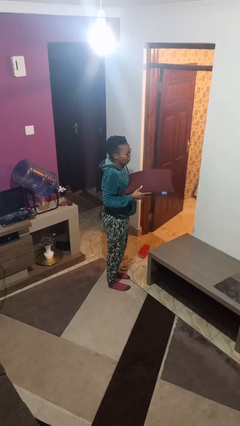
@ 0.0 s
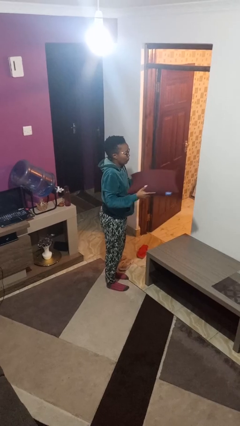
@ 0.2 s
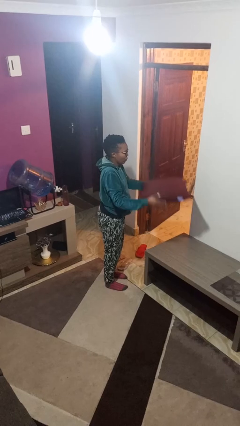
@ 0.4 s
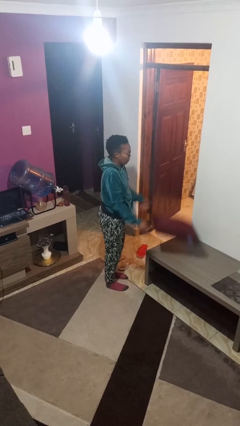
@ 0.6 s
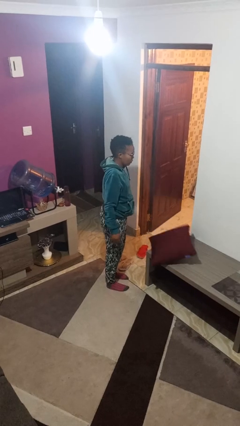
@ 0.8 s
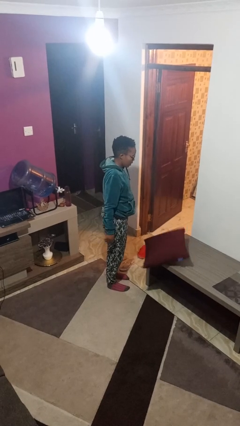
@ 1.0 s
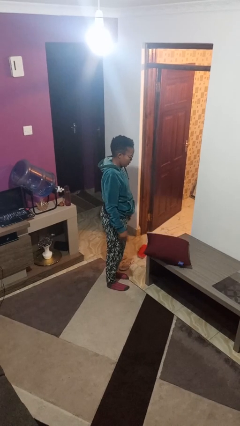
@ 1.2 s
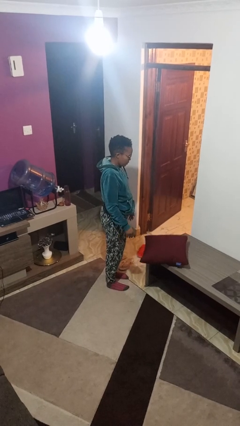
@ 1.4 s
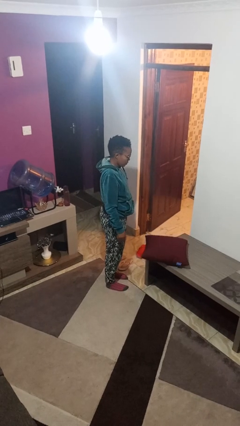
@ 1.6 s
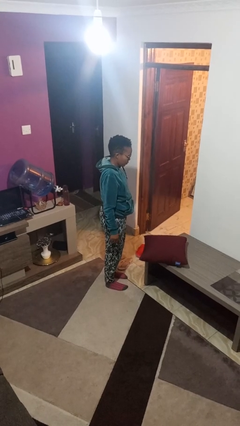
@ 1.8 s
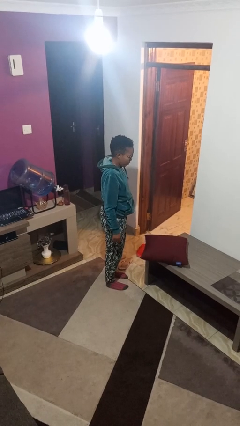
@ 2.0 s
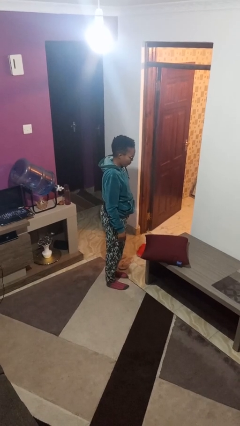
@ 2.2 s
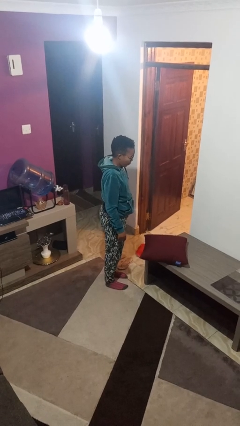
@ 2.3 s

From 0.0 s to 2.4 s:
person throws object on table

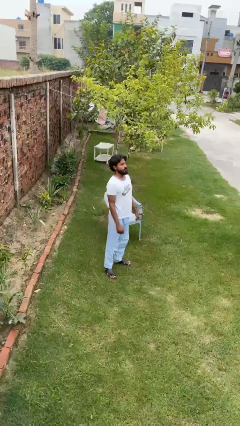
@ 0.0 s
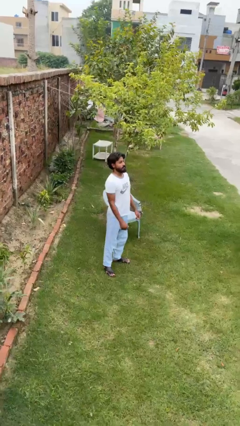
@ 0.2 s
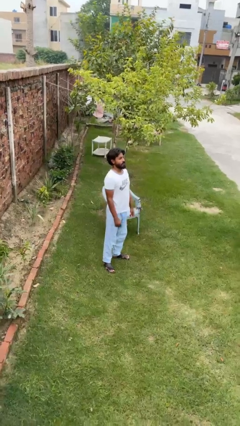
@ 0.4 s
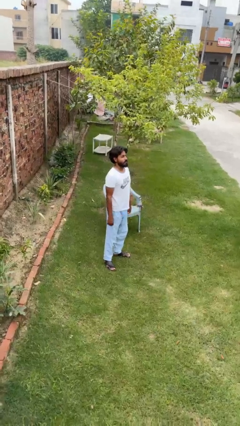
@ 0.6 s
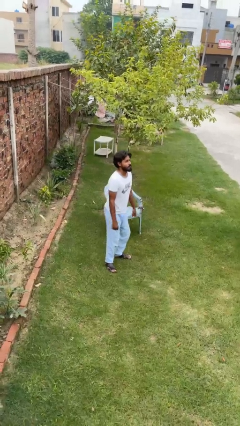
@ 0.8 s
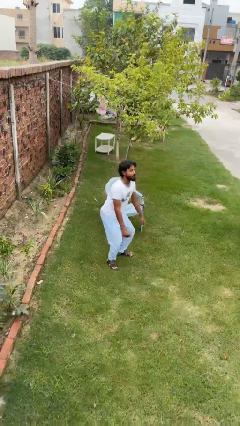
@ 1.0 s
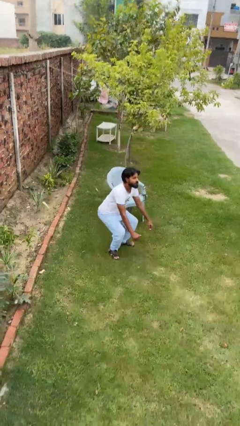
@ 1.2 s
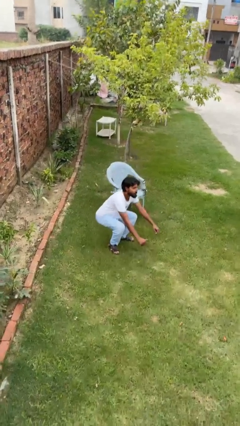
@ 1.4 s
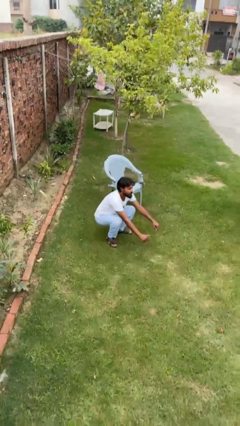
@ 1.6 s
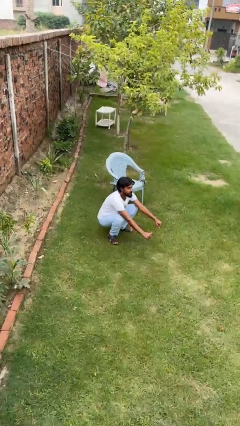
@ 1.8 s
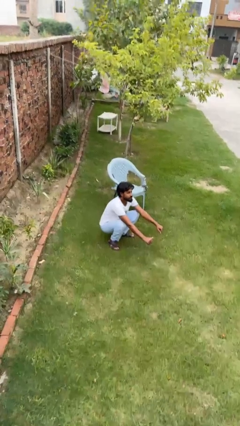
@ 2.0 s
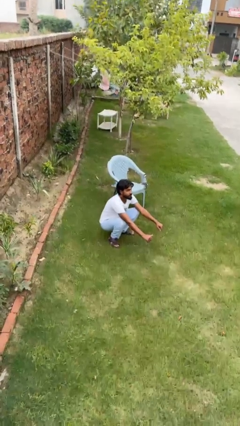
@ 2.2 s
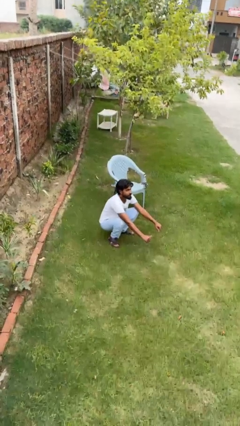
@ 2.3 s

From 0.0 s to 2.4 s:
person squats

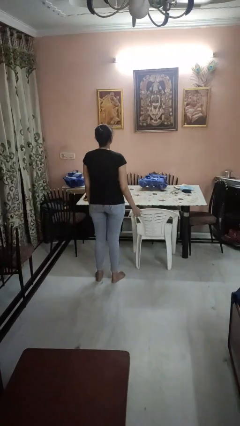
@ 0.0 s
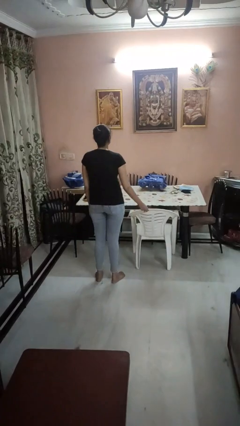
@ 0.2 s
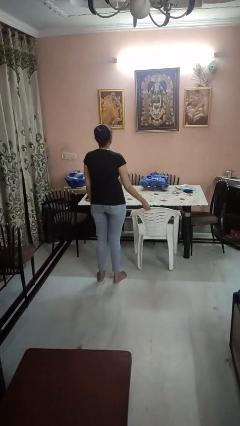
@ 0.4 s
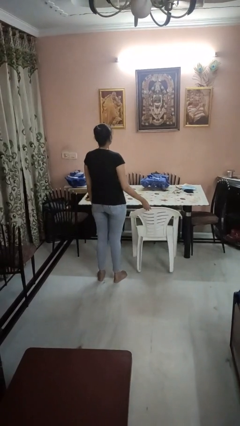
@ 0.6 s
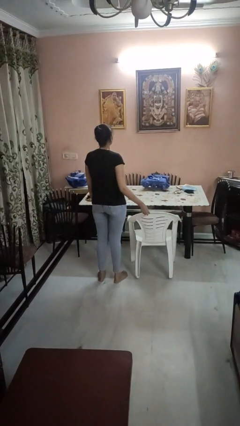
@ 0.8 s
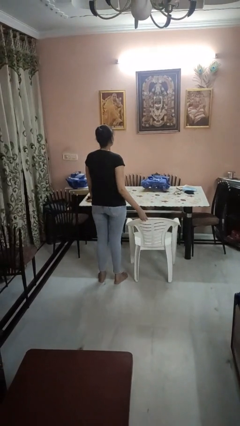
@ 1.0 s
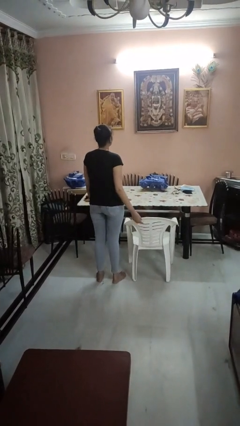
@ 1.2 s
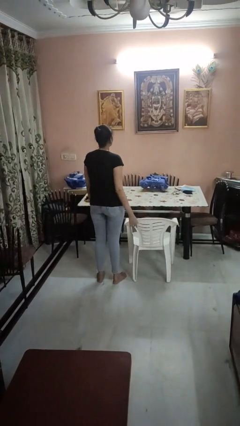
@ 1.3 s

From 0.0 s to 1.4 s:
person pulls out chair

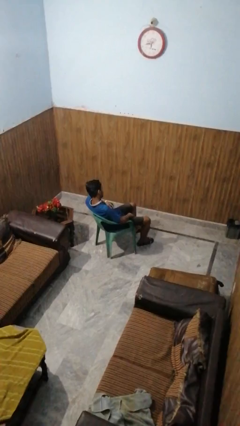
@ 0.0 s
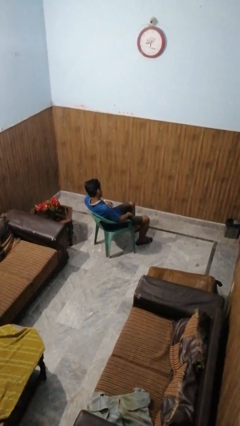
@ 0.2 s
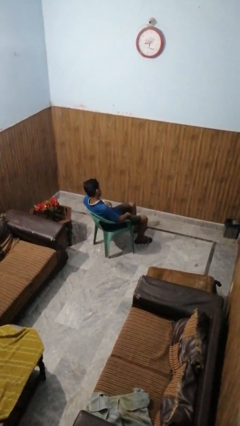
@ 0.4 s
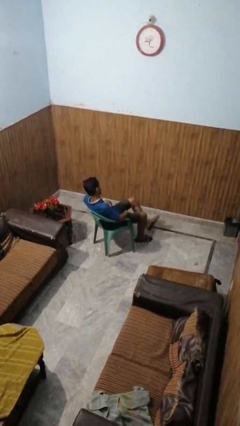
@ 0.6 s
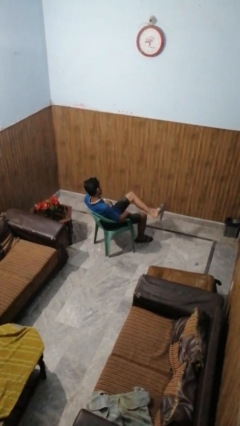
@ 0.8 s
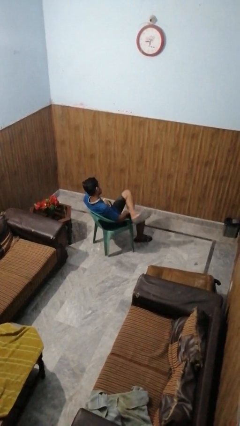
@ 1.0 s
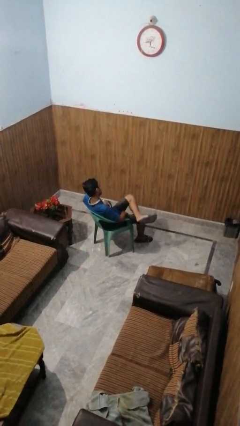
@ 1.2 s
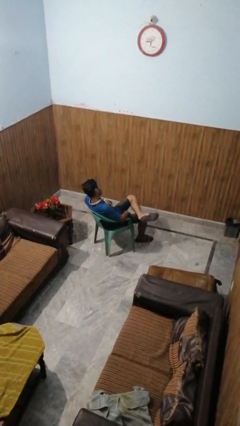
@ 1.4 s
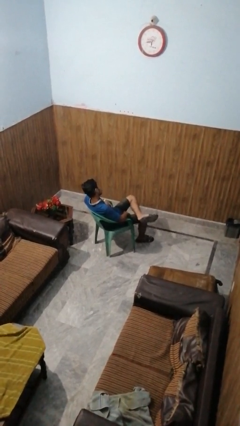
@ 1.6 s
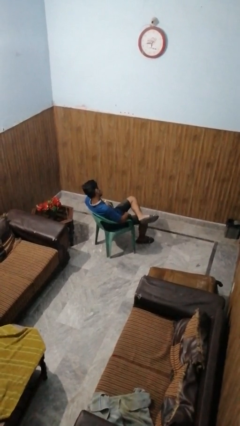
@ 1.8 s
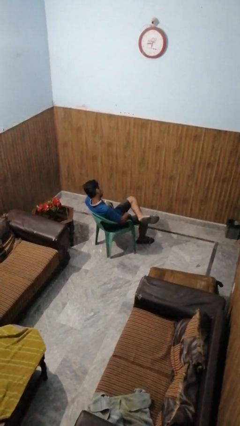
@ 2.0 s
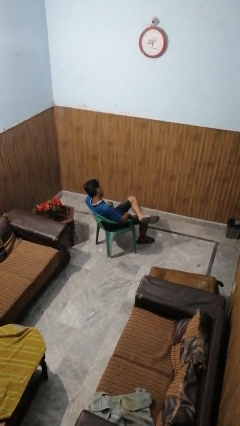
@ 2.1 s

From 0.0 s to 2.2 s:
person crosses legs

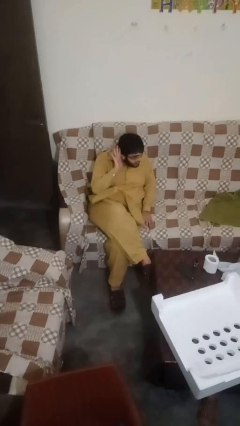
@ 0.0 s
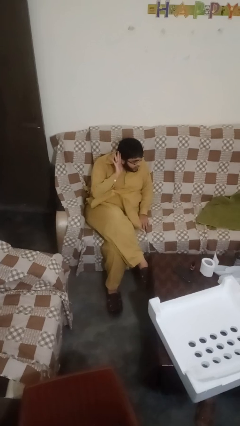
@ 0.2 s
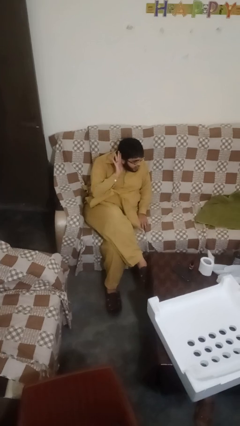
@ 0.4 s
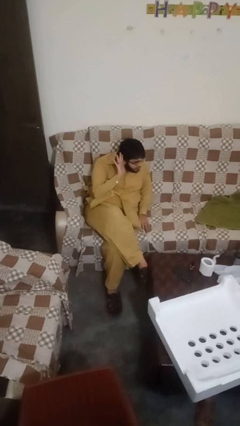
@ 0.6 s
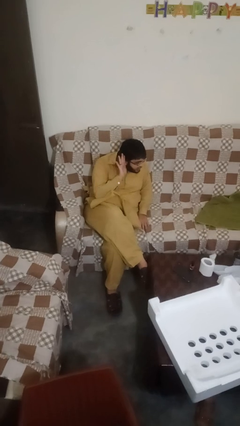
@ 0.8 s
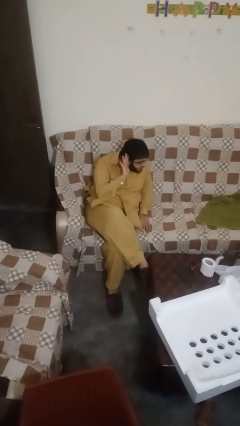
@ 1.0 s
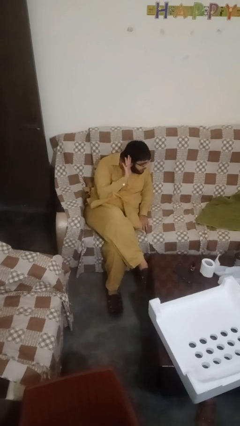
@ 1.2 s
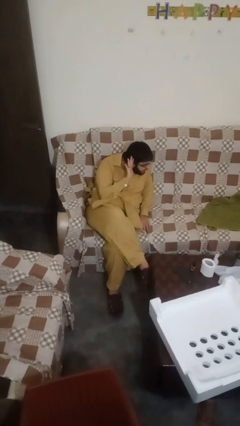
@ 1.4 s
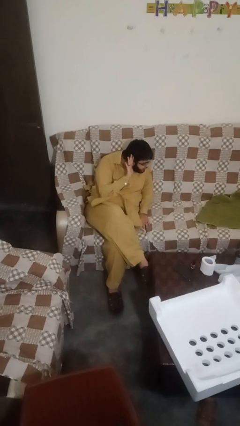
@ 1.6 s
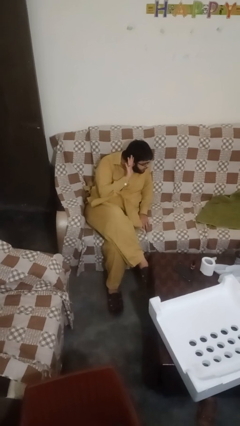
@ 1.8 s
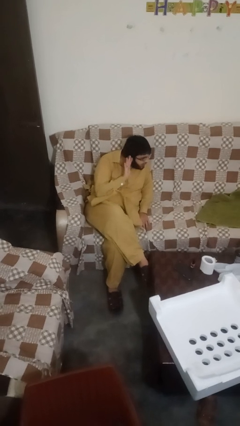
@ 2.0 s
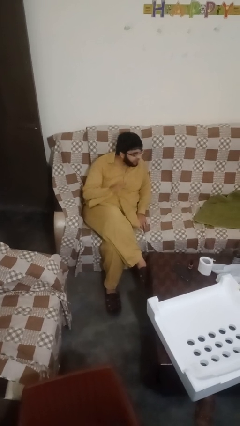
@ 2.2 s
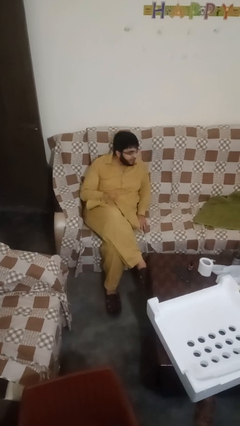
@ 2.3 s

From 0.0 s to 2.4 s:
person gestures listen closely

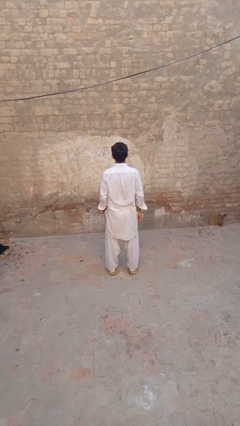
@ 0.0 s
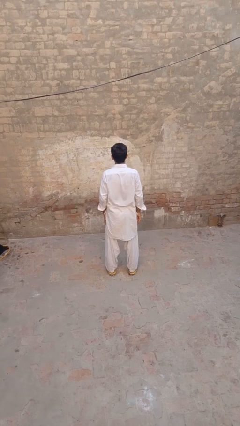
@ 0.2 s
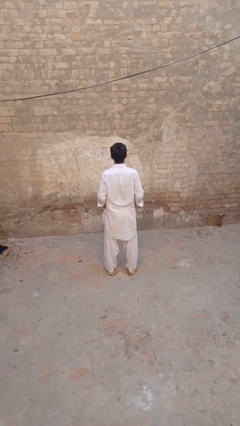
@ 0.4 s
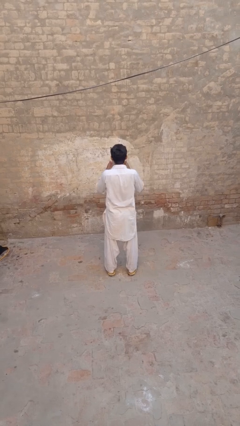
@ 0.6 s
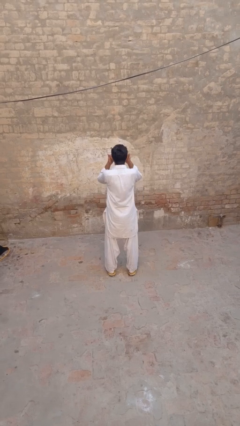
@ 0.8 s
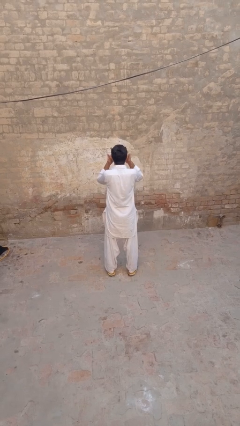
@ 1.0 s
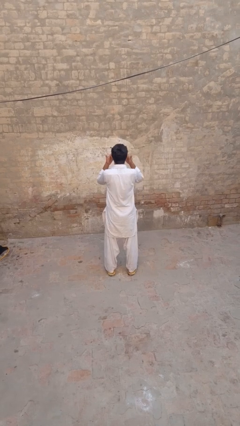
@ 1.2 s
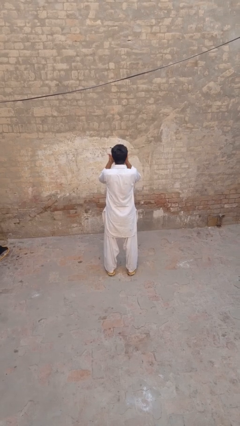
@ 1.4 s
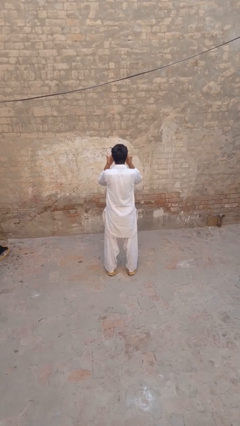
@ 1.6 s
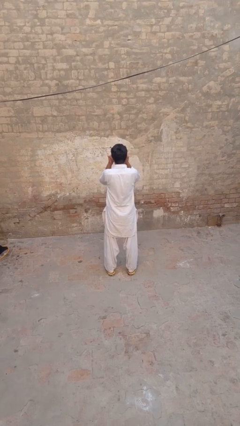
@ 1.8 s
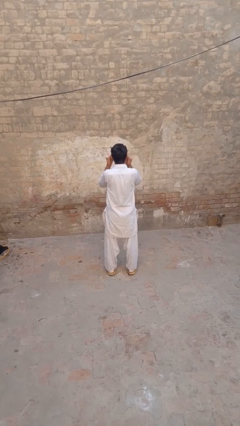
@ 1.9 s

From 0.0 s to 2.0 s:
person shades eyes

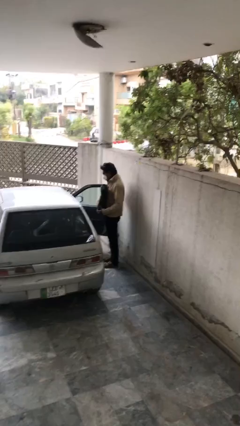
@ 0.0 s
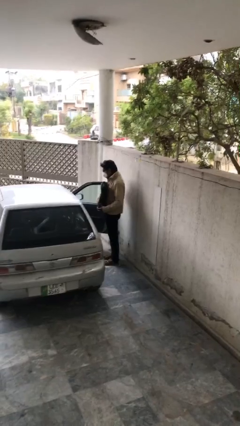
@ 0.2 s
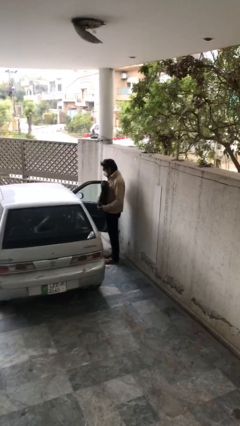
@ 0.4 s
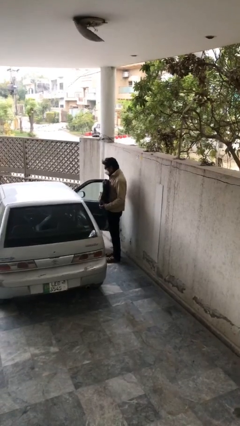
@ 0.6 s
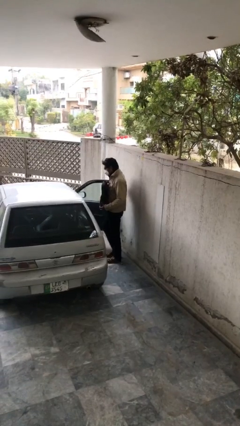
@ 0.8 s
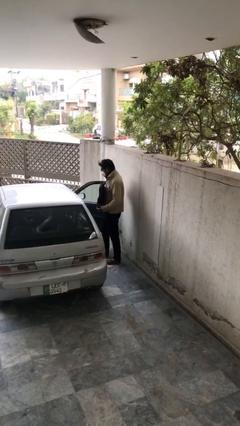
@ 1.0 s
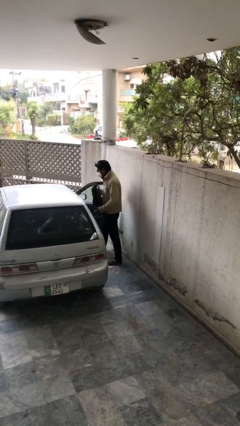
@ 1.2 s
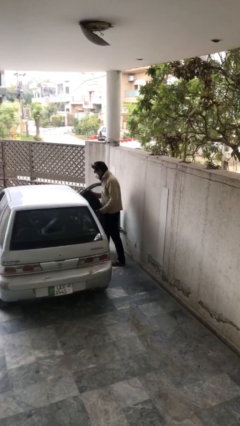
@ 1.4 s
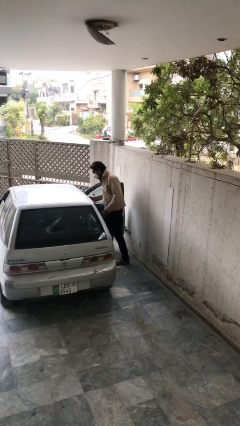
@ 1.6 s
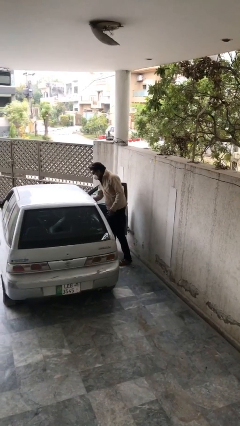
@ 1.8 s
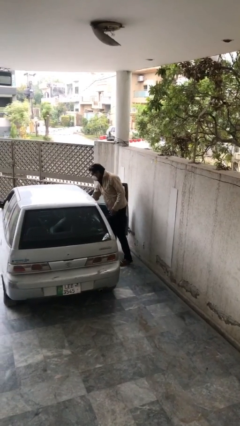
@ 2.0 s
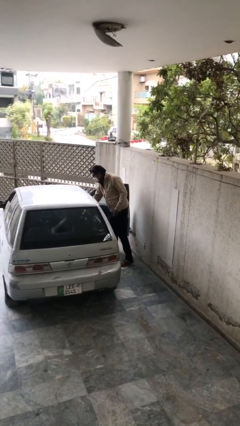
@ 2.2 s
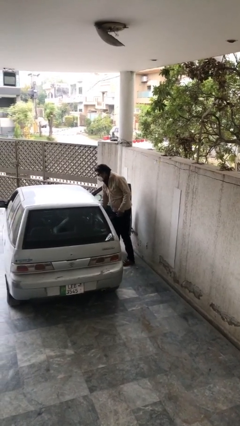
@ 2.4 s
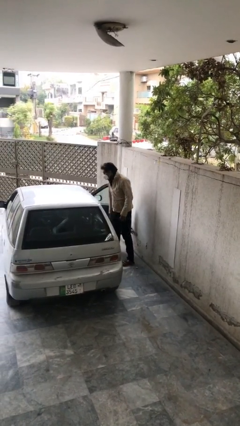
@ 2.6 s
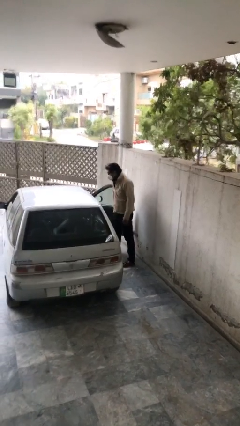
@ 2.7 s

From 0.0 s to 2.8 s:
person loads car

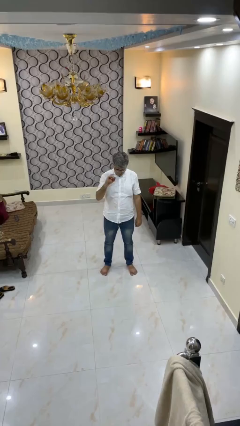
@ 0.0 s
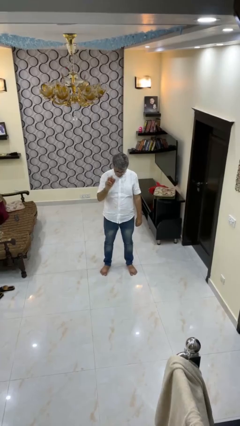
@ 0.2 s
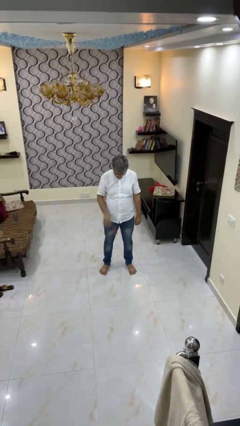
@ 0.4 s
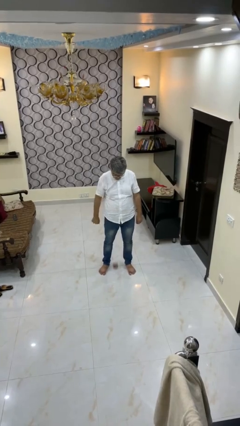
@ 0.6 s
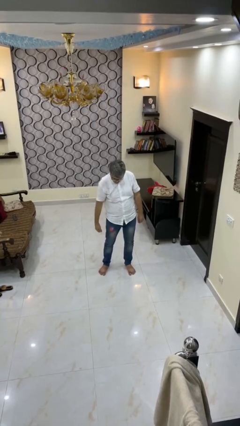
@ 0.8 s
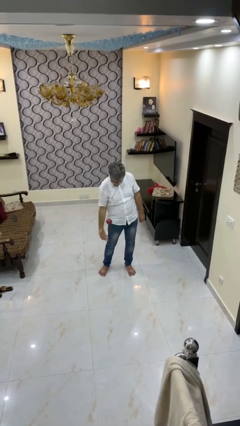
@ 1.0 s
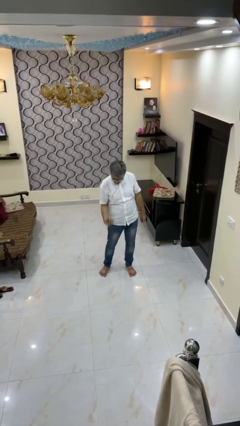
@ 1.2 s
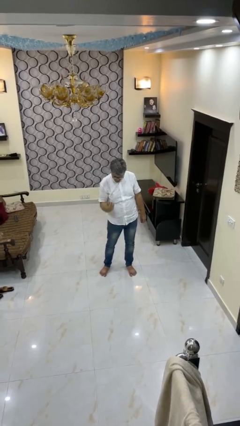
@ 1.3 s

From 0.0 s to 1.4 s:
person bounces ball on floor
